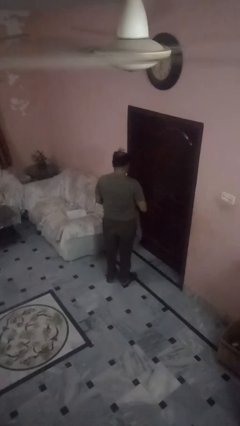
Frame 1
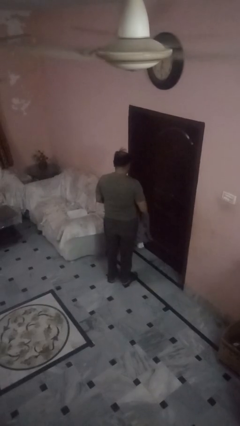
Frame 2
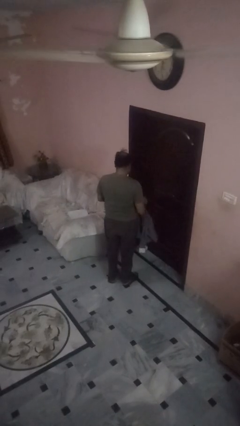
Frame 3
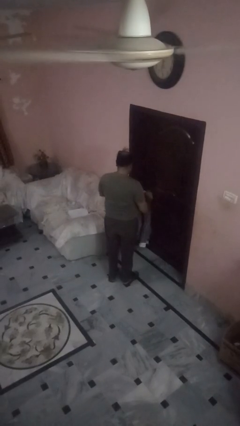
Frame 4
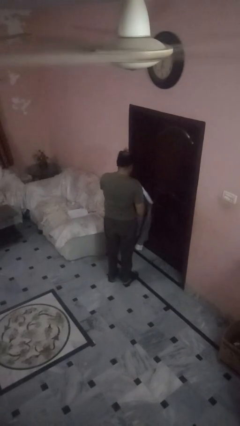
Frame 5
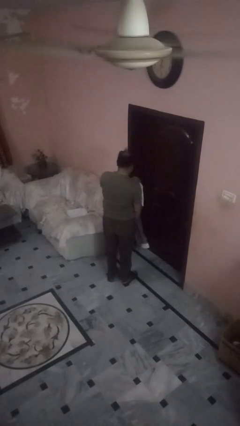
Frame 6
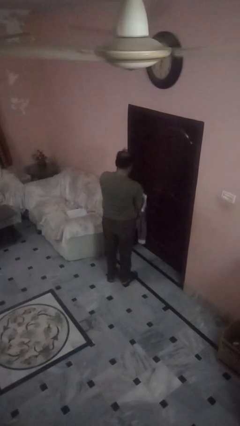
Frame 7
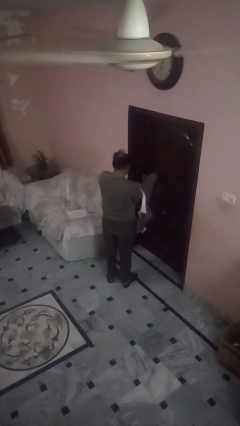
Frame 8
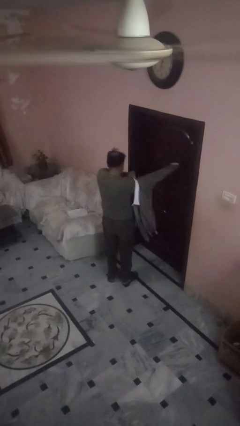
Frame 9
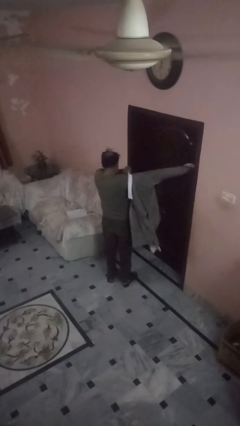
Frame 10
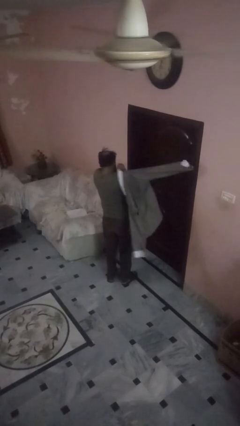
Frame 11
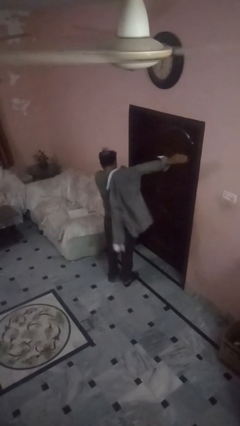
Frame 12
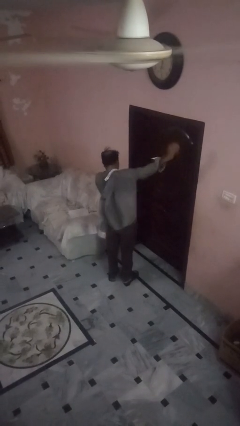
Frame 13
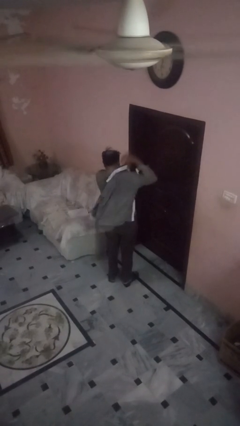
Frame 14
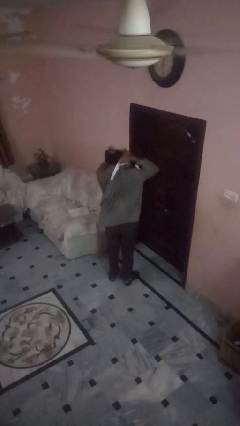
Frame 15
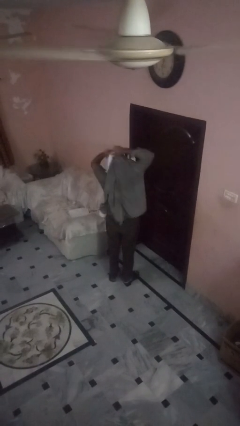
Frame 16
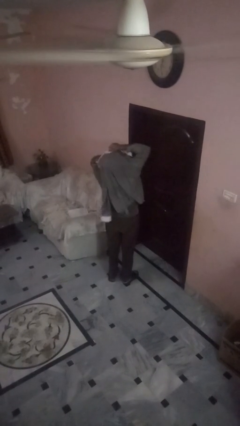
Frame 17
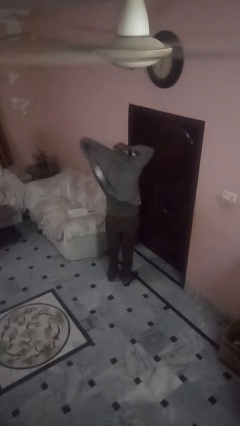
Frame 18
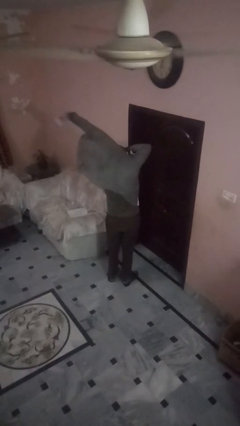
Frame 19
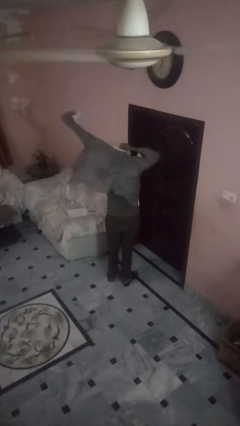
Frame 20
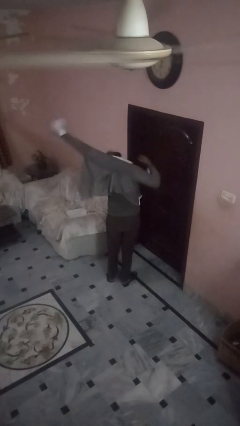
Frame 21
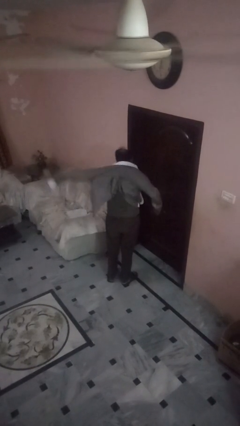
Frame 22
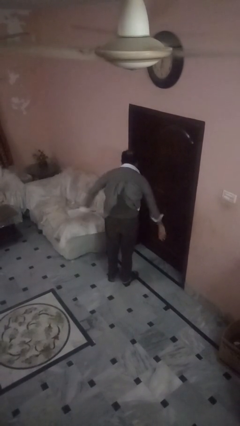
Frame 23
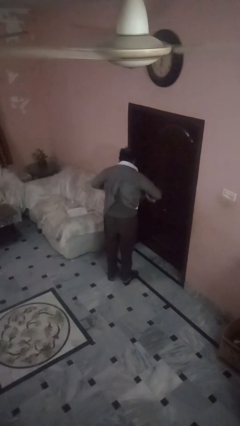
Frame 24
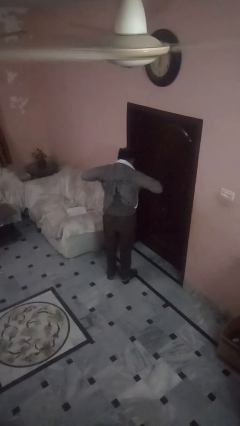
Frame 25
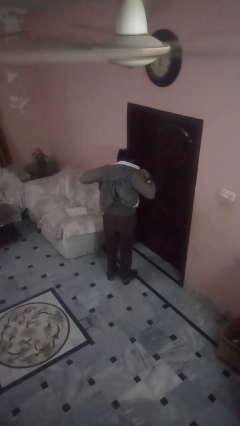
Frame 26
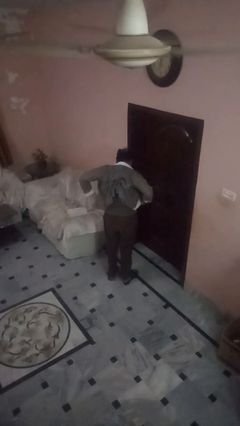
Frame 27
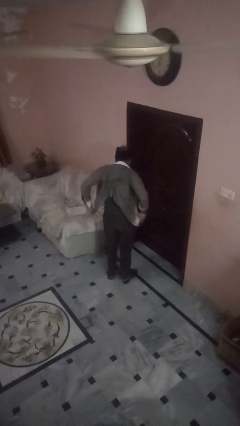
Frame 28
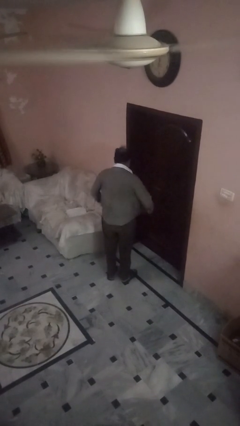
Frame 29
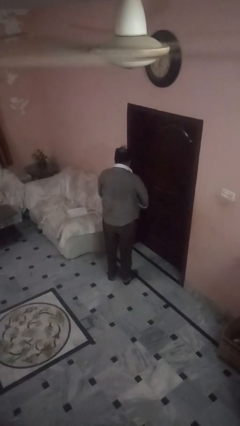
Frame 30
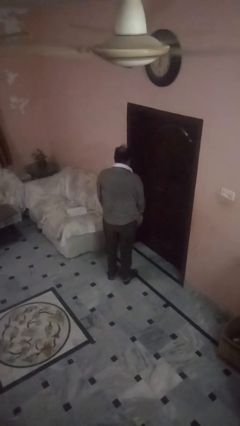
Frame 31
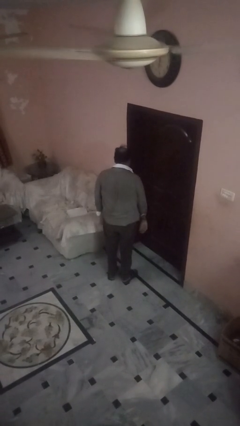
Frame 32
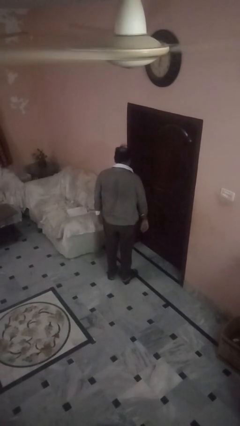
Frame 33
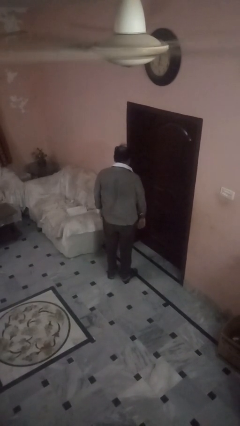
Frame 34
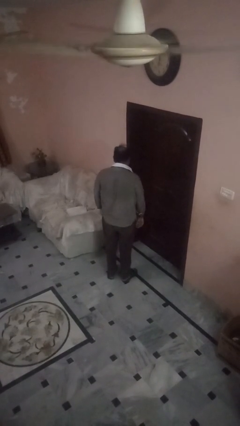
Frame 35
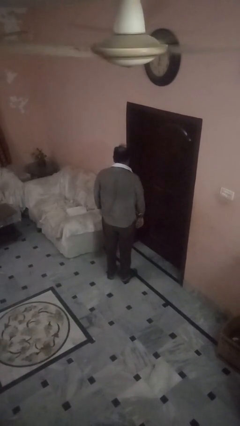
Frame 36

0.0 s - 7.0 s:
person puts on shirt

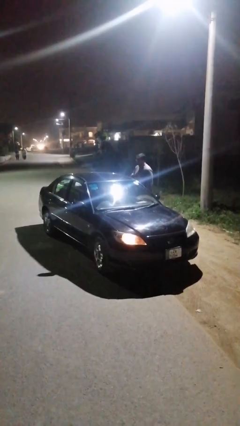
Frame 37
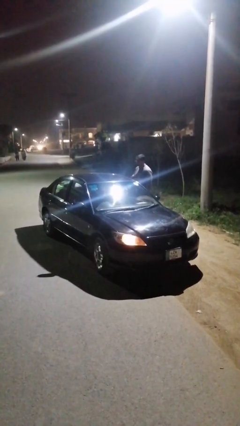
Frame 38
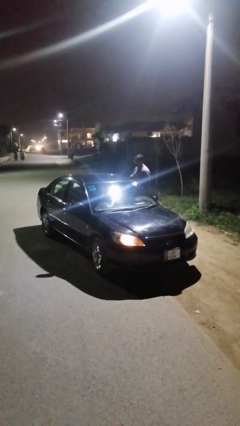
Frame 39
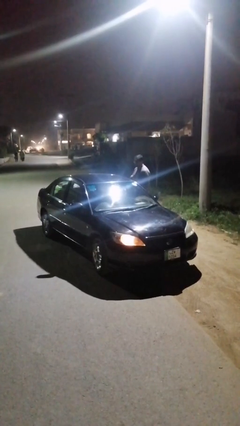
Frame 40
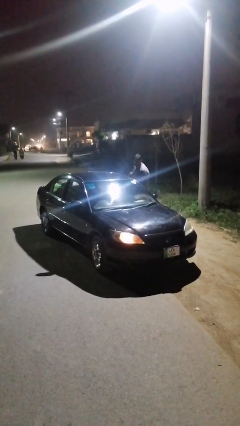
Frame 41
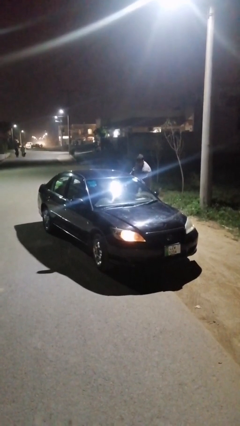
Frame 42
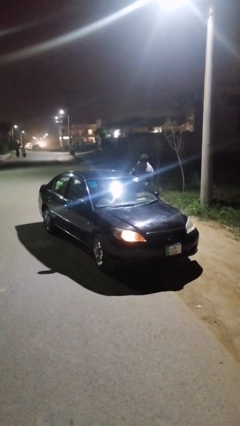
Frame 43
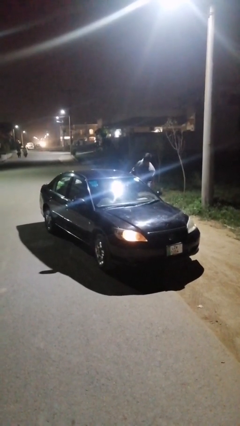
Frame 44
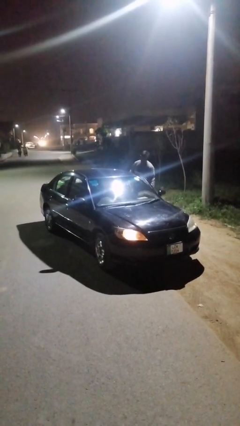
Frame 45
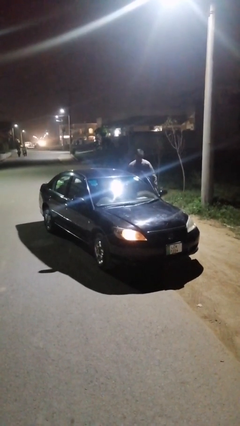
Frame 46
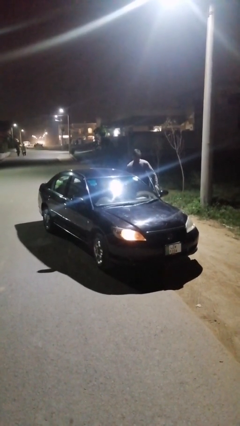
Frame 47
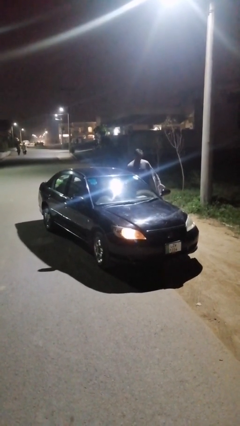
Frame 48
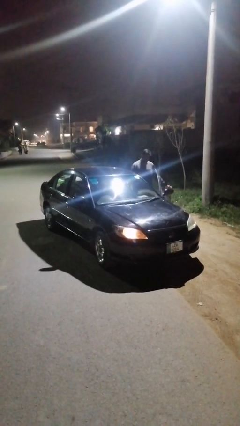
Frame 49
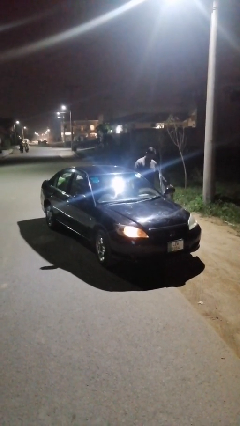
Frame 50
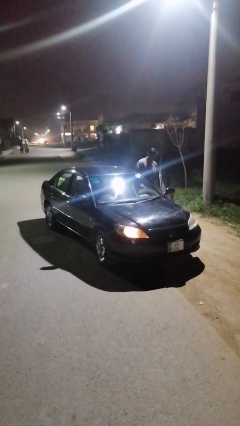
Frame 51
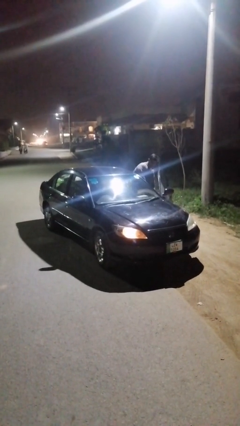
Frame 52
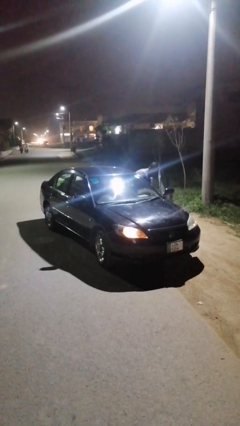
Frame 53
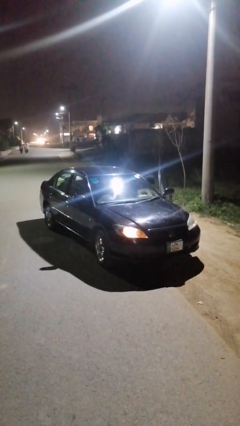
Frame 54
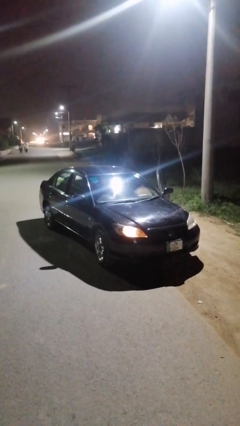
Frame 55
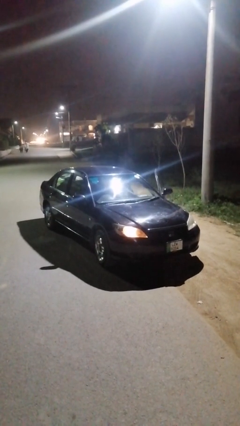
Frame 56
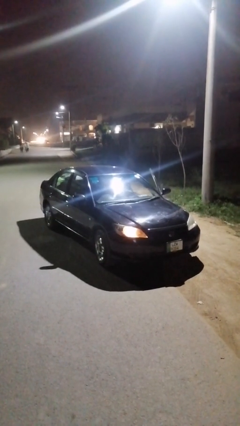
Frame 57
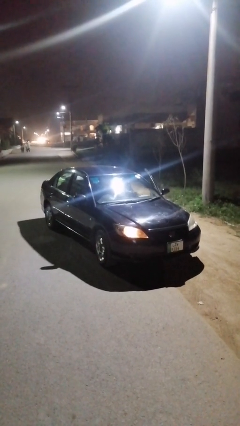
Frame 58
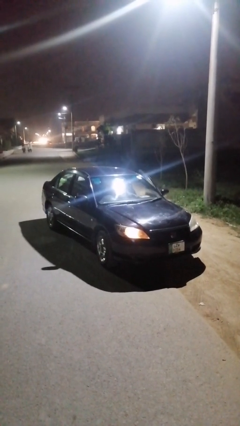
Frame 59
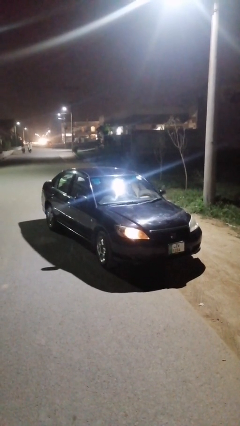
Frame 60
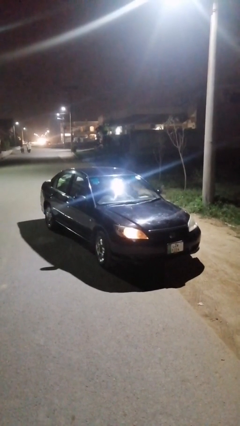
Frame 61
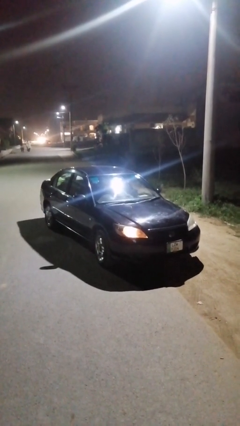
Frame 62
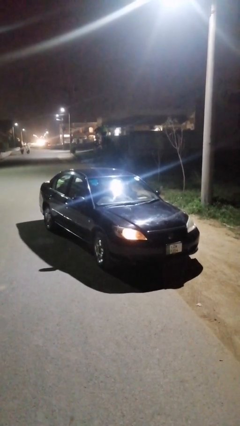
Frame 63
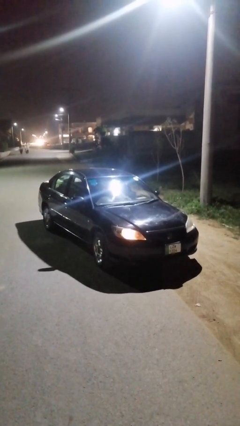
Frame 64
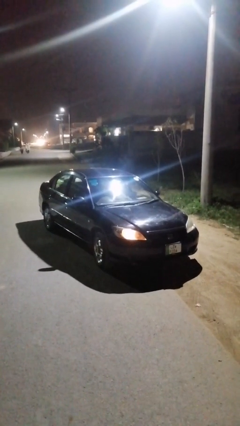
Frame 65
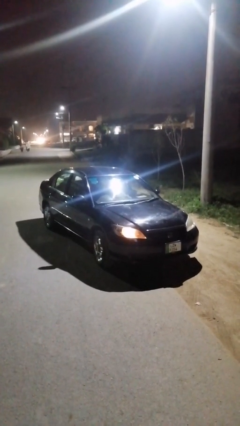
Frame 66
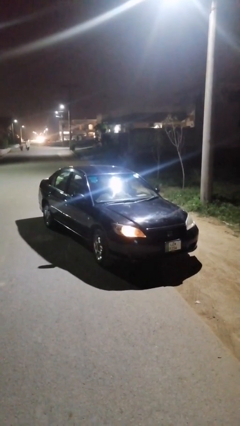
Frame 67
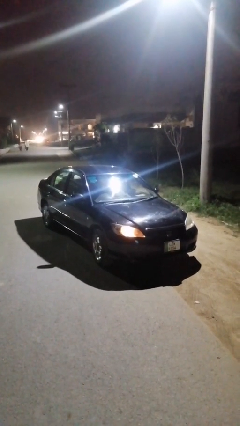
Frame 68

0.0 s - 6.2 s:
car picks up person

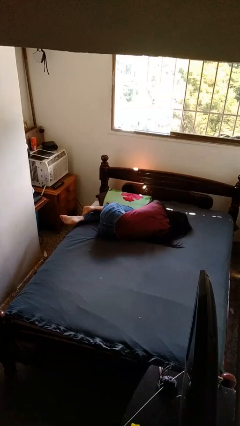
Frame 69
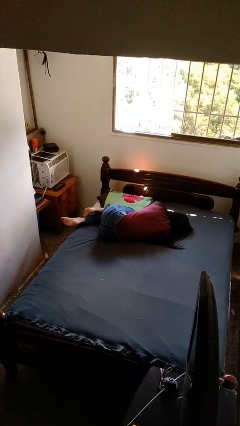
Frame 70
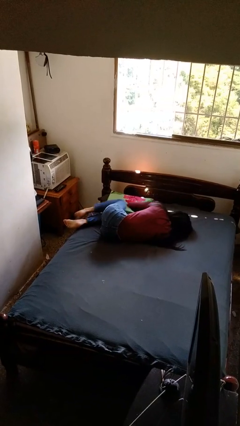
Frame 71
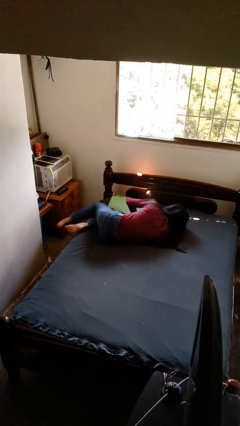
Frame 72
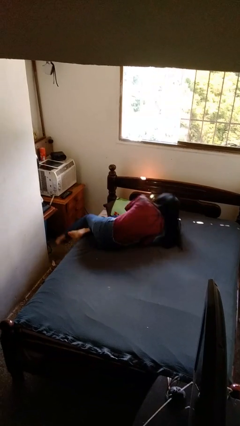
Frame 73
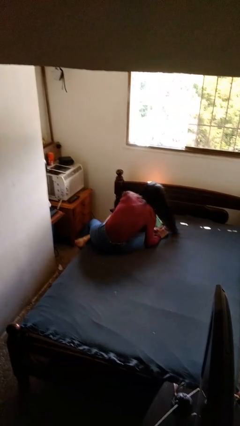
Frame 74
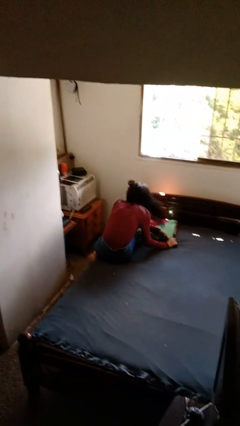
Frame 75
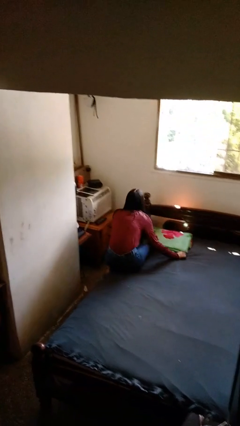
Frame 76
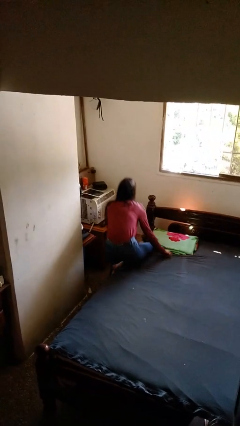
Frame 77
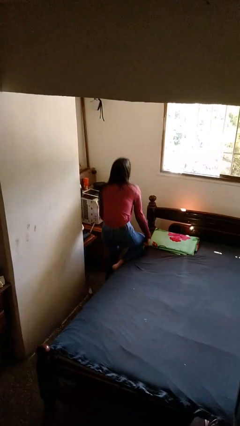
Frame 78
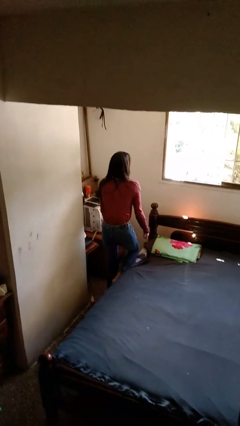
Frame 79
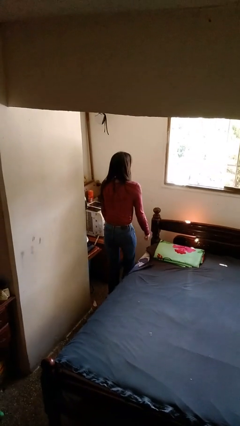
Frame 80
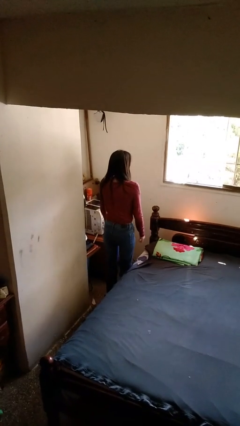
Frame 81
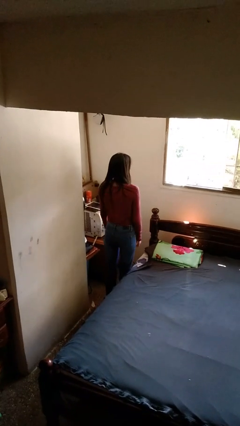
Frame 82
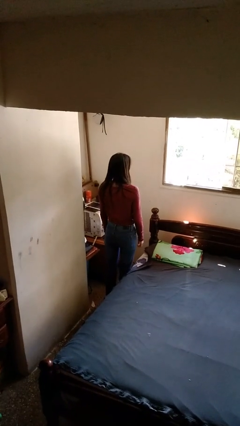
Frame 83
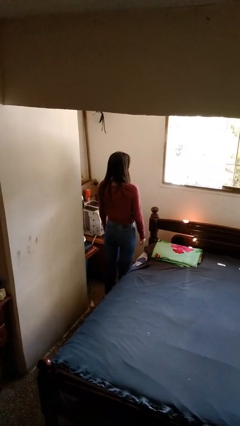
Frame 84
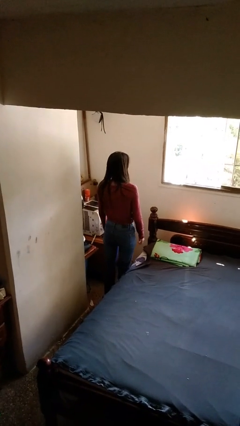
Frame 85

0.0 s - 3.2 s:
person stands up

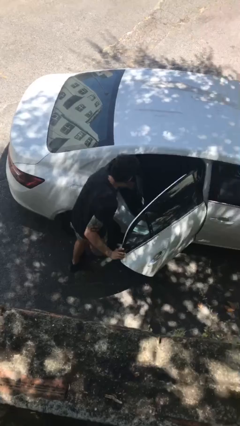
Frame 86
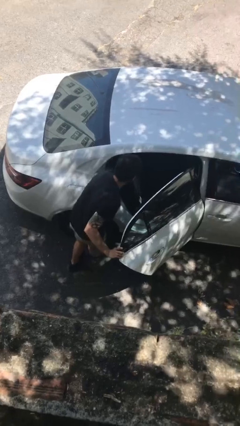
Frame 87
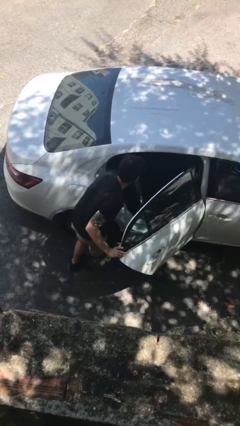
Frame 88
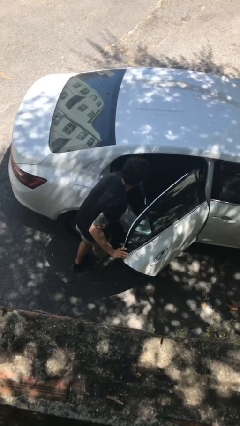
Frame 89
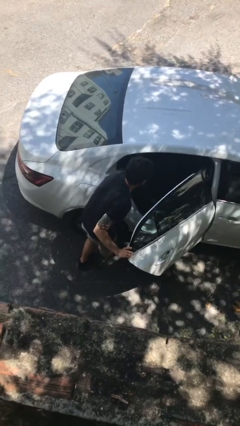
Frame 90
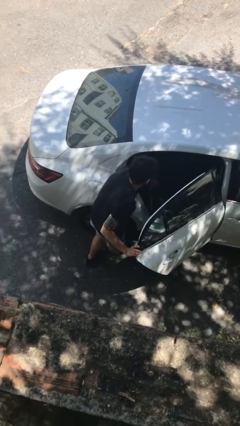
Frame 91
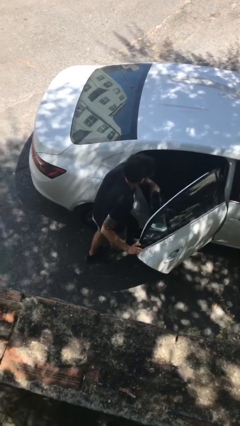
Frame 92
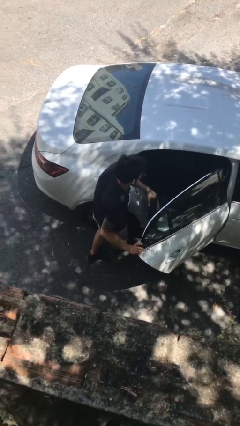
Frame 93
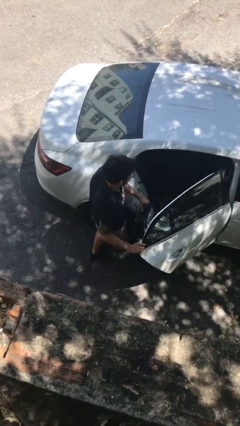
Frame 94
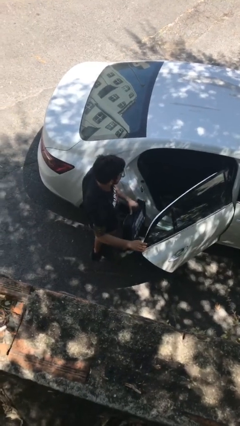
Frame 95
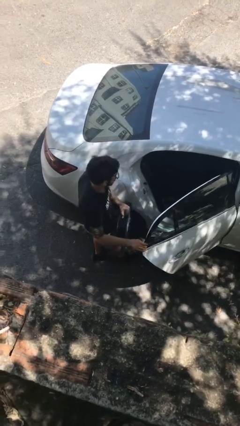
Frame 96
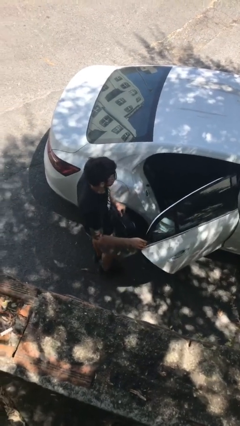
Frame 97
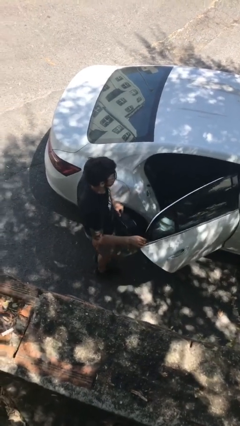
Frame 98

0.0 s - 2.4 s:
person unloads car
